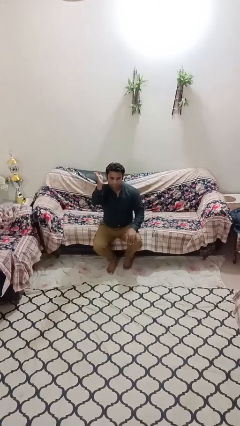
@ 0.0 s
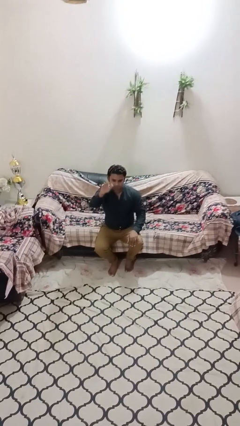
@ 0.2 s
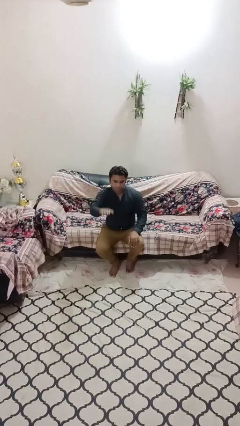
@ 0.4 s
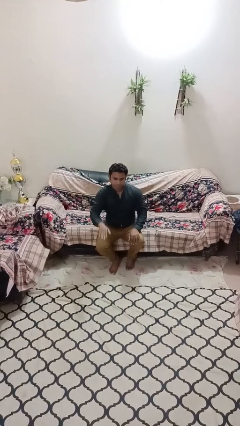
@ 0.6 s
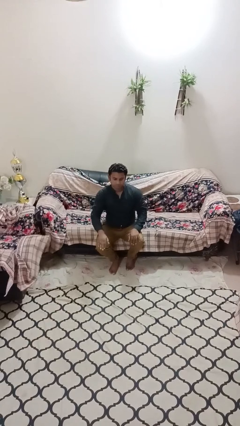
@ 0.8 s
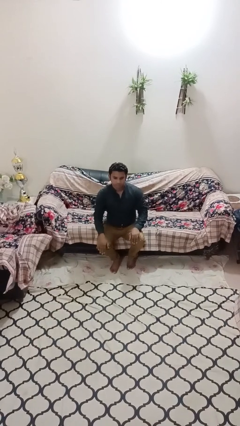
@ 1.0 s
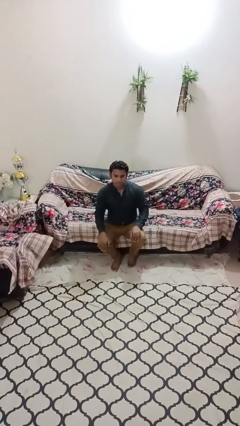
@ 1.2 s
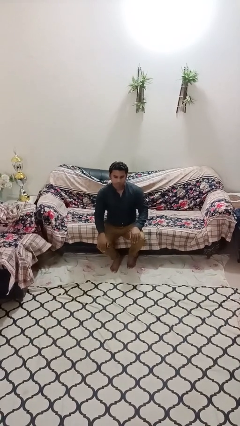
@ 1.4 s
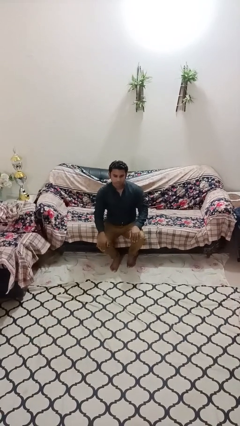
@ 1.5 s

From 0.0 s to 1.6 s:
person gestures swipe down

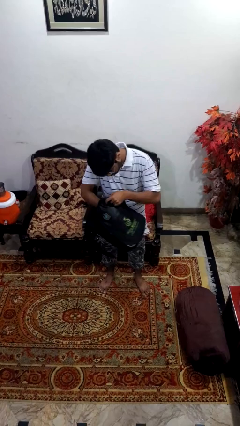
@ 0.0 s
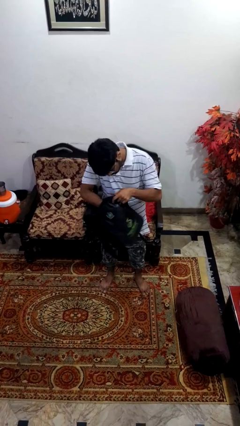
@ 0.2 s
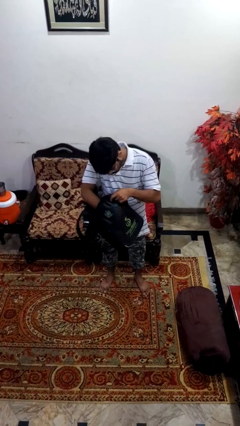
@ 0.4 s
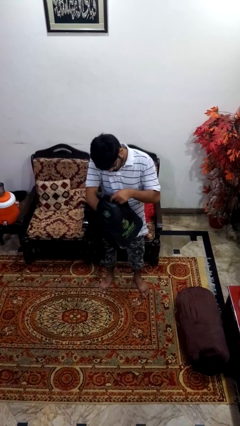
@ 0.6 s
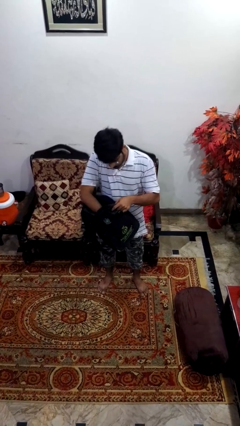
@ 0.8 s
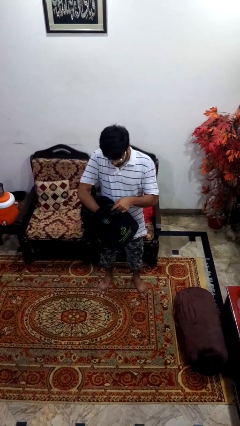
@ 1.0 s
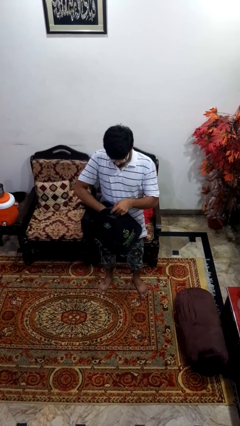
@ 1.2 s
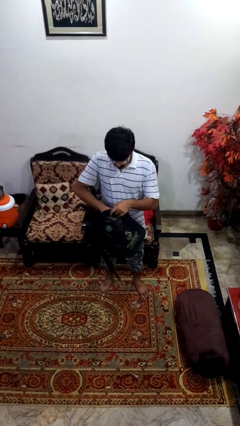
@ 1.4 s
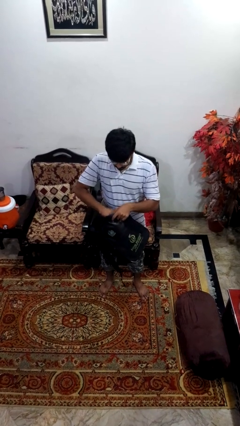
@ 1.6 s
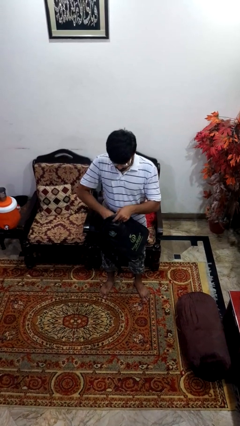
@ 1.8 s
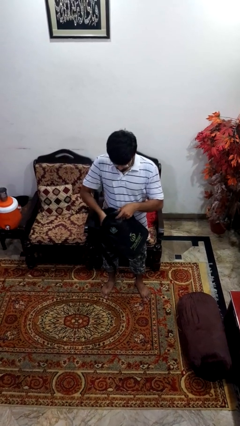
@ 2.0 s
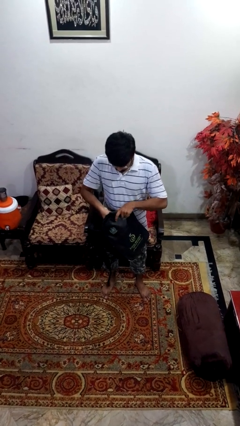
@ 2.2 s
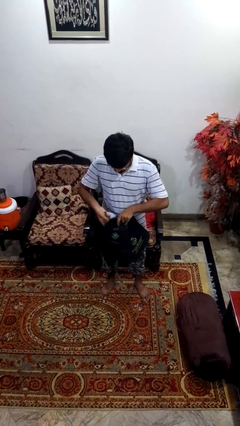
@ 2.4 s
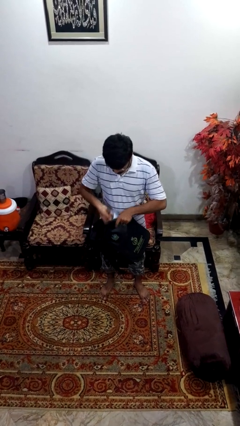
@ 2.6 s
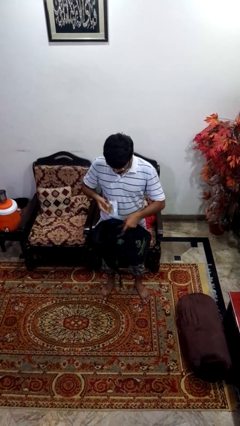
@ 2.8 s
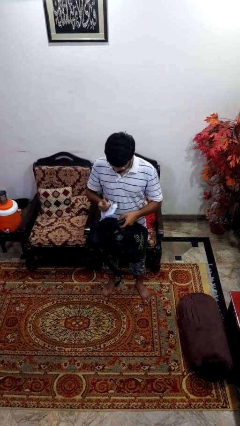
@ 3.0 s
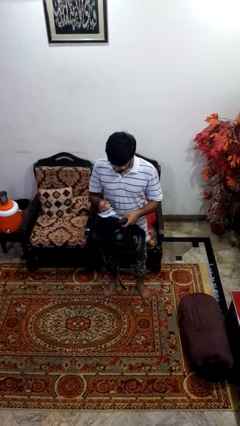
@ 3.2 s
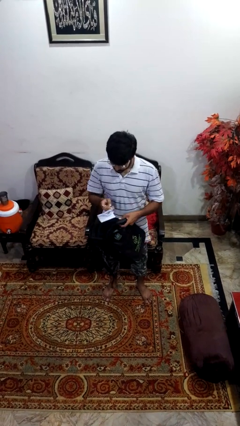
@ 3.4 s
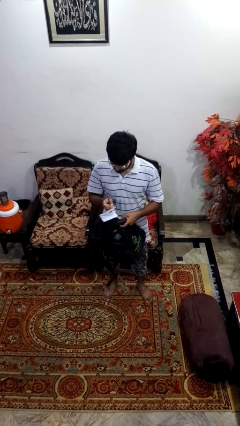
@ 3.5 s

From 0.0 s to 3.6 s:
person takes object from backpack

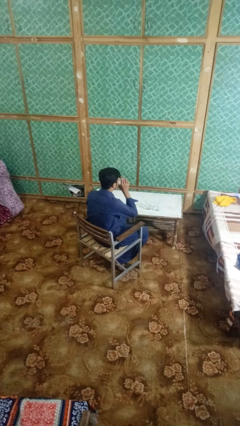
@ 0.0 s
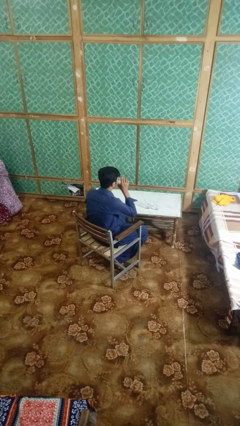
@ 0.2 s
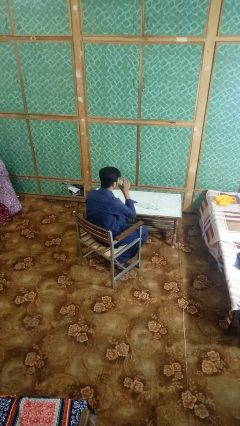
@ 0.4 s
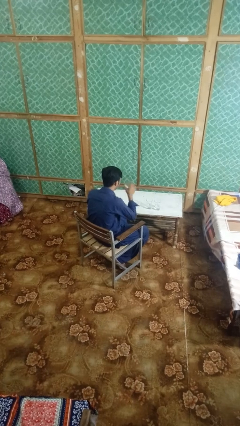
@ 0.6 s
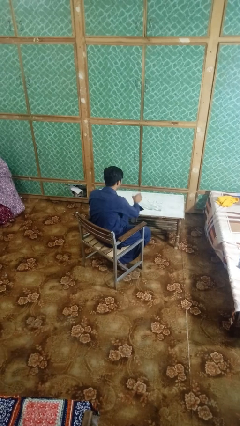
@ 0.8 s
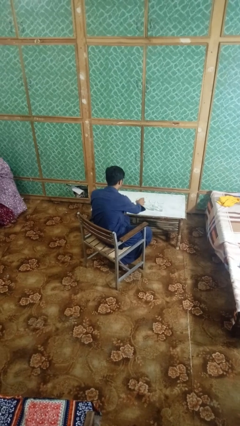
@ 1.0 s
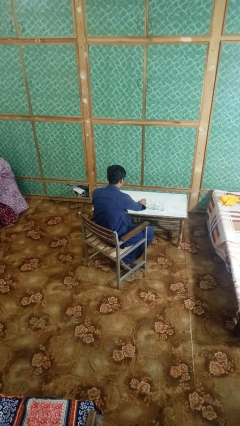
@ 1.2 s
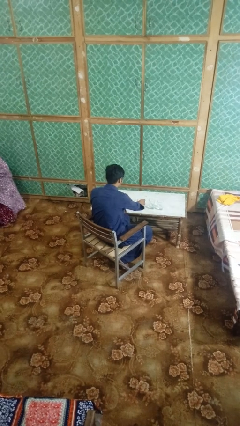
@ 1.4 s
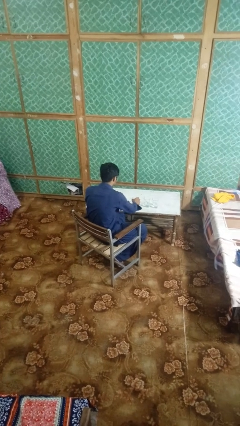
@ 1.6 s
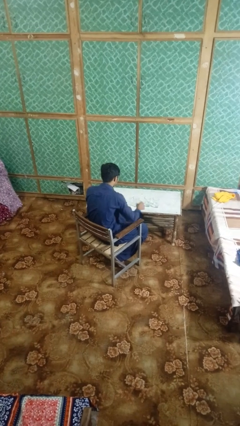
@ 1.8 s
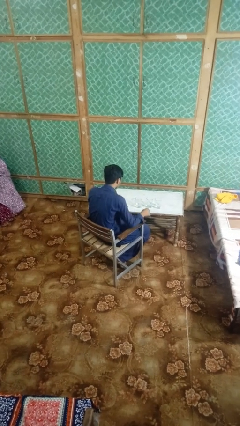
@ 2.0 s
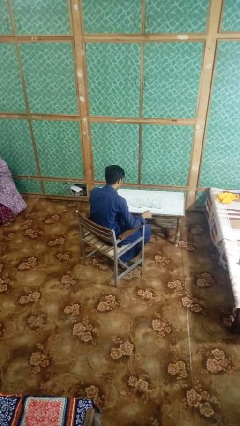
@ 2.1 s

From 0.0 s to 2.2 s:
person puts down object on table

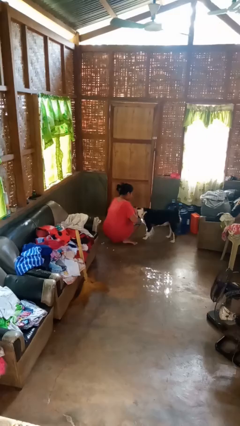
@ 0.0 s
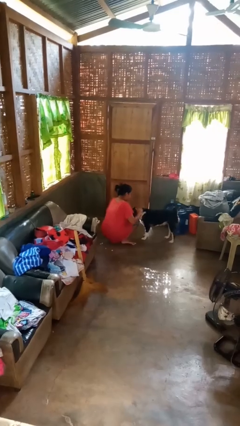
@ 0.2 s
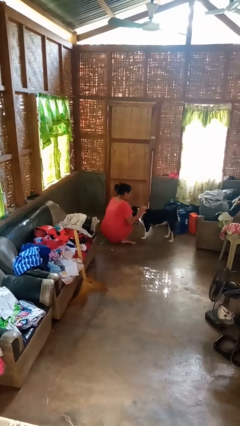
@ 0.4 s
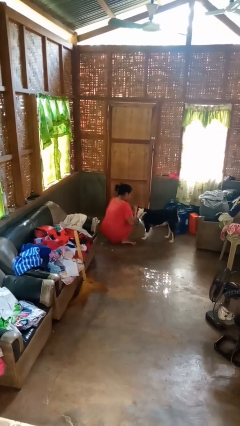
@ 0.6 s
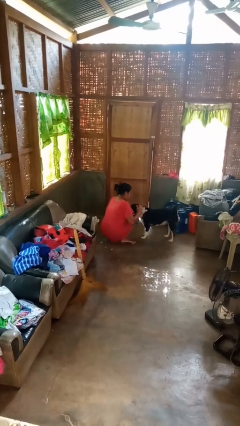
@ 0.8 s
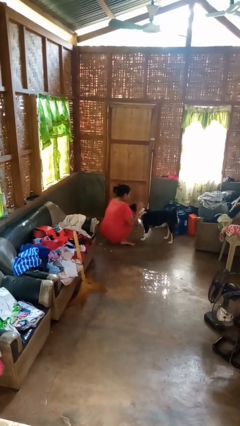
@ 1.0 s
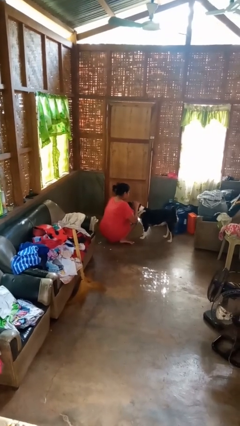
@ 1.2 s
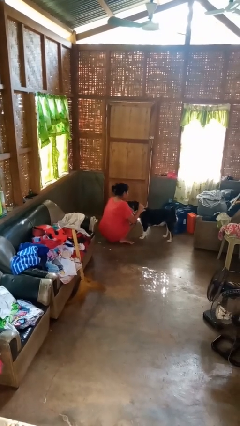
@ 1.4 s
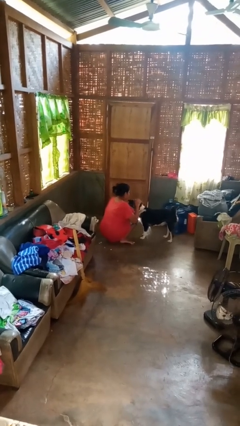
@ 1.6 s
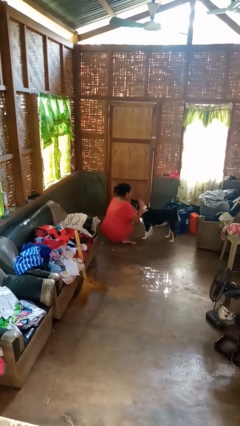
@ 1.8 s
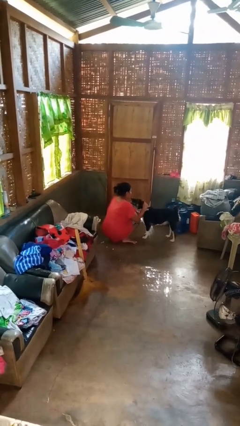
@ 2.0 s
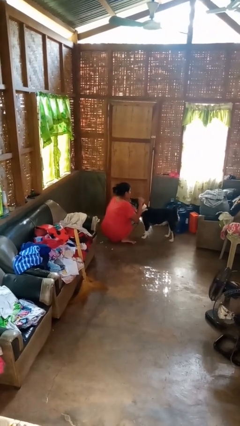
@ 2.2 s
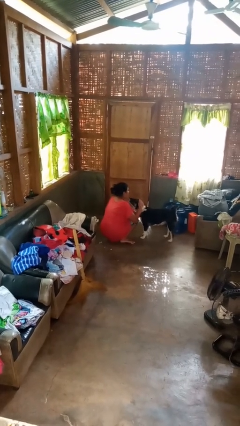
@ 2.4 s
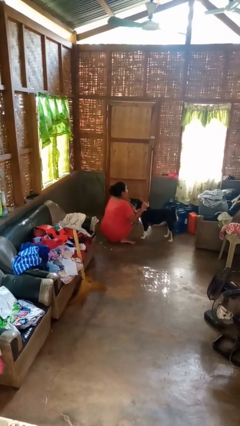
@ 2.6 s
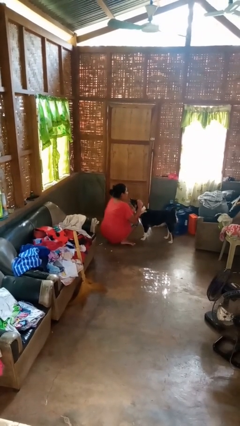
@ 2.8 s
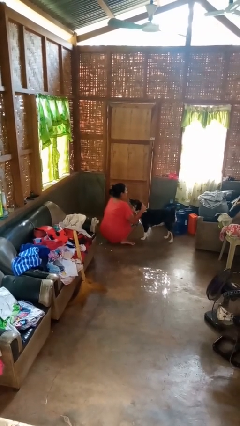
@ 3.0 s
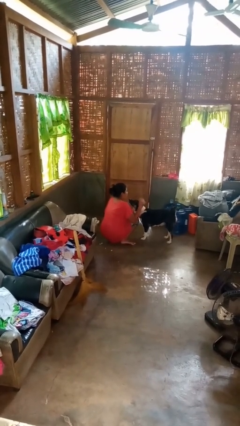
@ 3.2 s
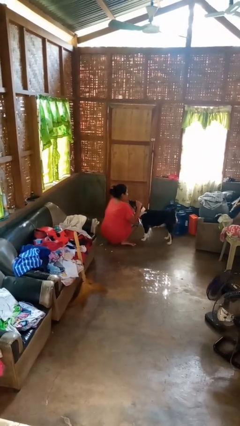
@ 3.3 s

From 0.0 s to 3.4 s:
person pets dog

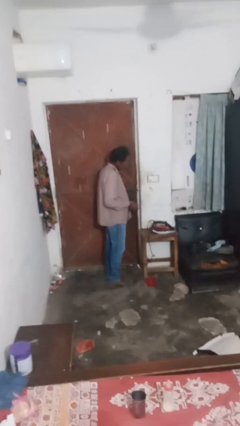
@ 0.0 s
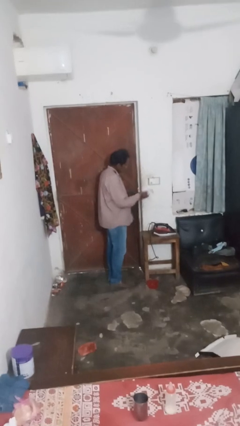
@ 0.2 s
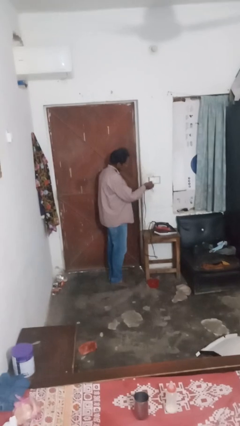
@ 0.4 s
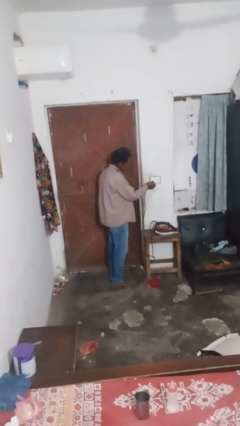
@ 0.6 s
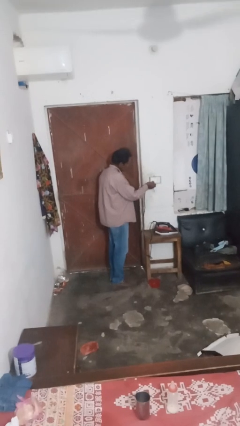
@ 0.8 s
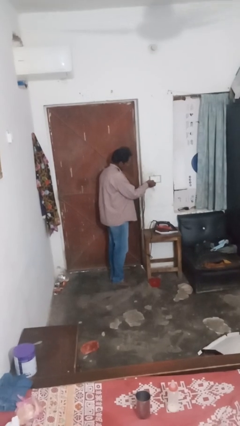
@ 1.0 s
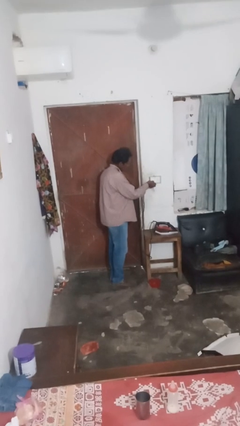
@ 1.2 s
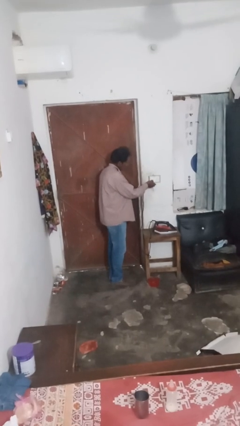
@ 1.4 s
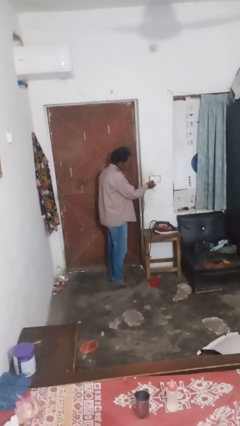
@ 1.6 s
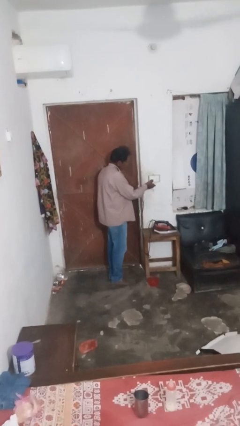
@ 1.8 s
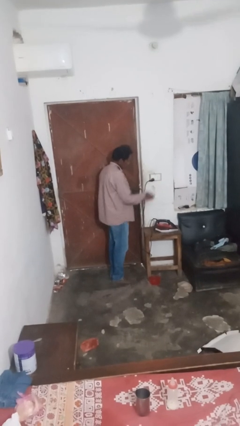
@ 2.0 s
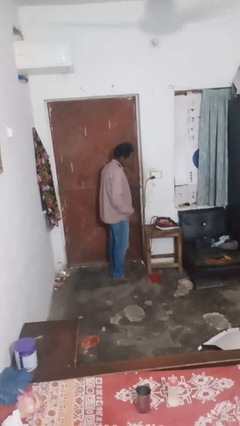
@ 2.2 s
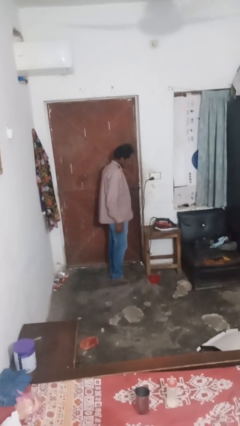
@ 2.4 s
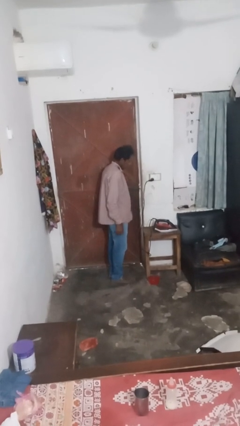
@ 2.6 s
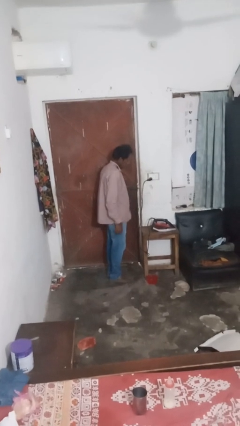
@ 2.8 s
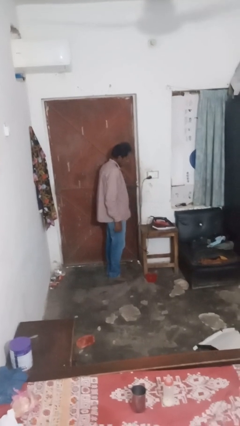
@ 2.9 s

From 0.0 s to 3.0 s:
person plugs into electrical socket

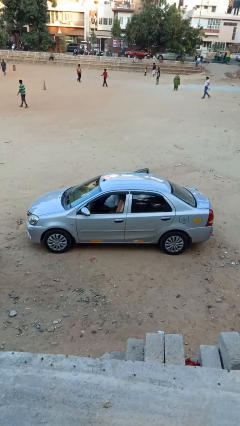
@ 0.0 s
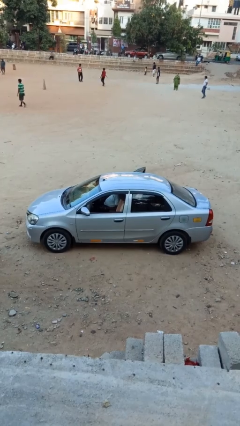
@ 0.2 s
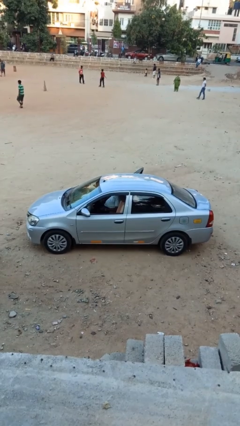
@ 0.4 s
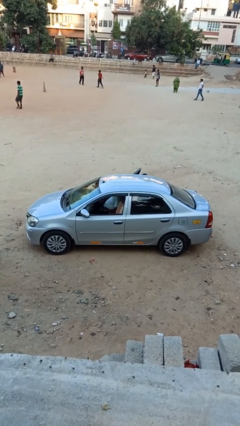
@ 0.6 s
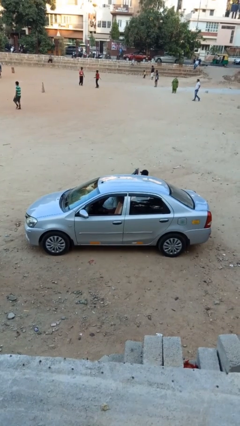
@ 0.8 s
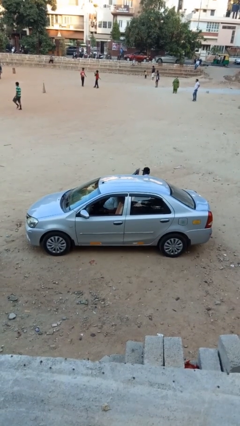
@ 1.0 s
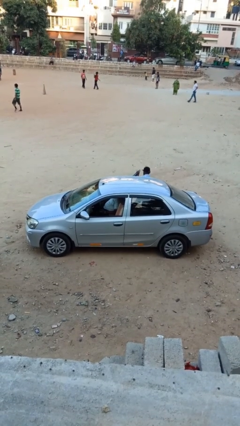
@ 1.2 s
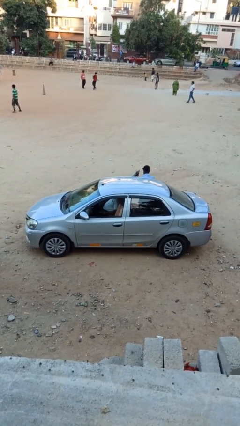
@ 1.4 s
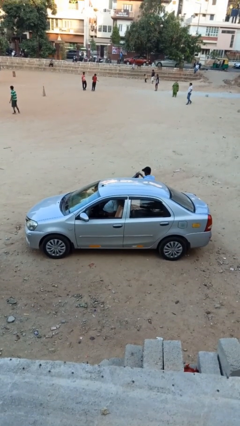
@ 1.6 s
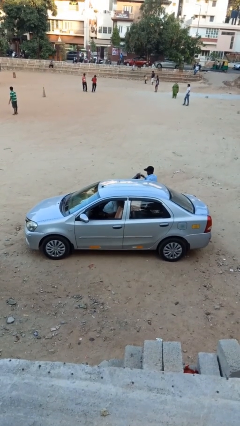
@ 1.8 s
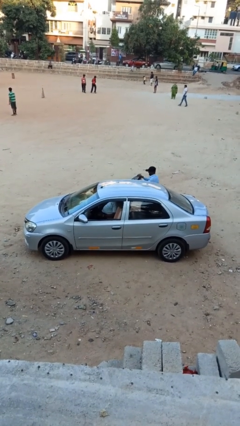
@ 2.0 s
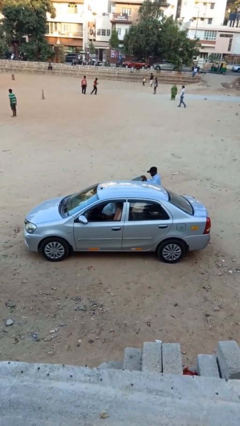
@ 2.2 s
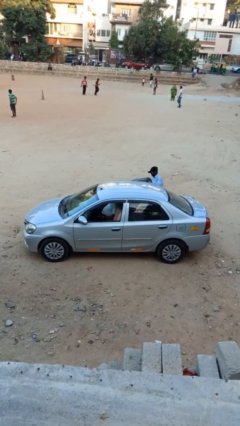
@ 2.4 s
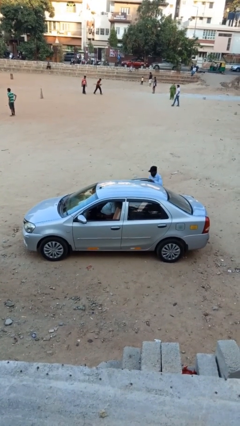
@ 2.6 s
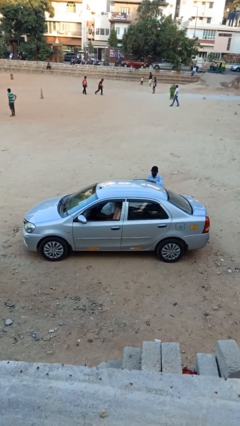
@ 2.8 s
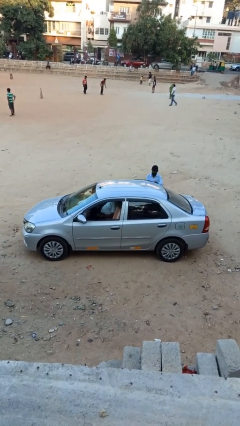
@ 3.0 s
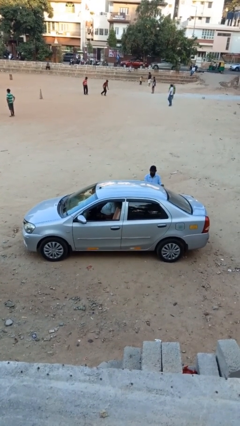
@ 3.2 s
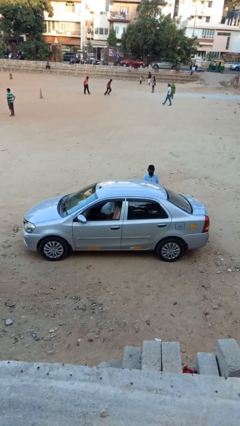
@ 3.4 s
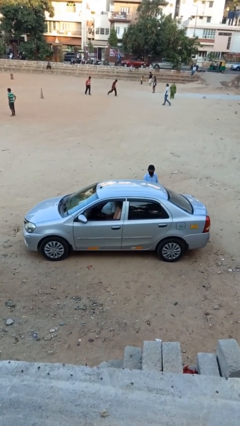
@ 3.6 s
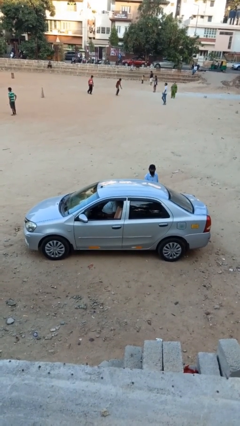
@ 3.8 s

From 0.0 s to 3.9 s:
car drops off person
